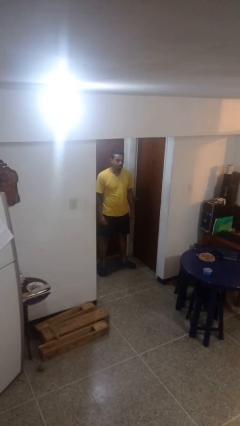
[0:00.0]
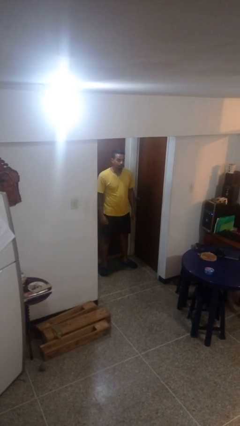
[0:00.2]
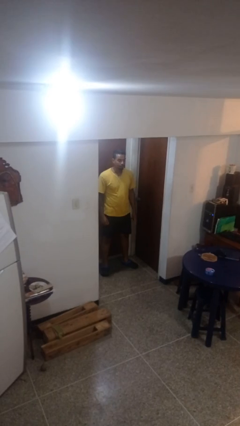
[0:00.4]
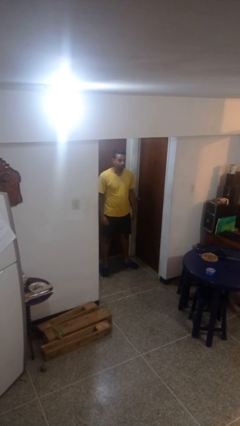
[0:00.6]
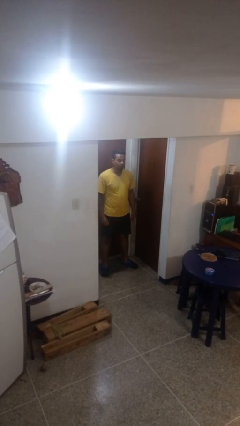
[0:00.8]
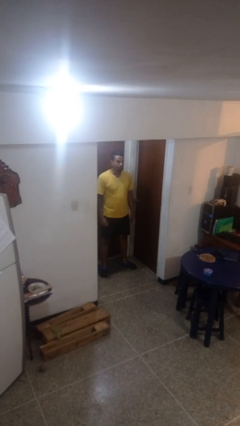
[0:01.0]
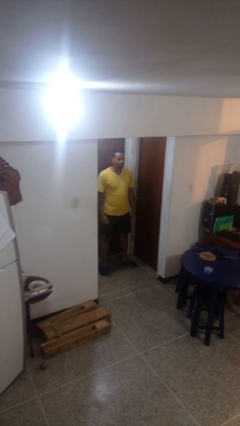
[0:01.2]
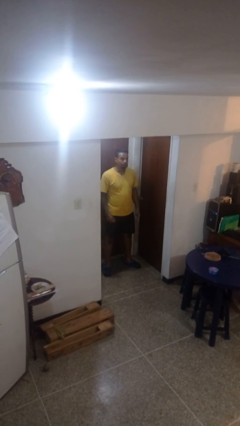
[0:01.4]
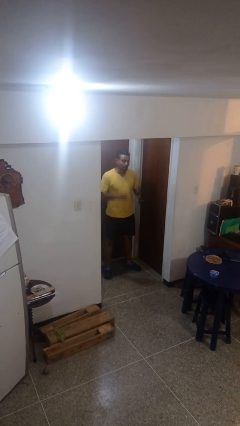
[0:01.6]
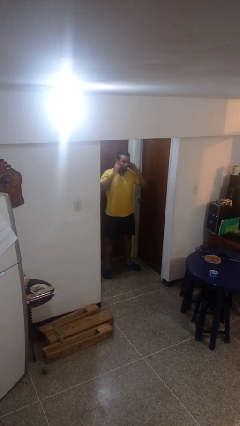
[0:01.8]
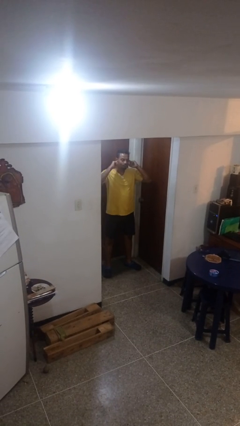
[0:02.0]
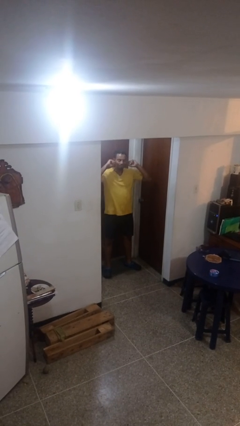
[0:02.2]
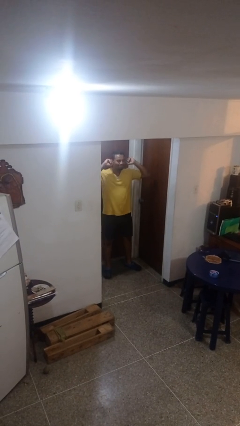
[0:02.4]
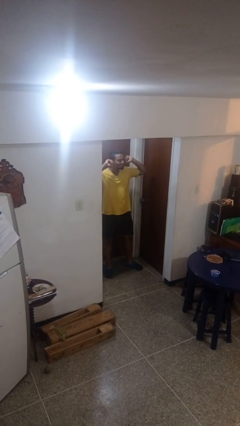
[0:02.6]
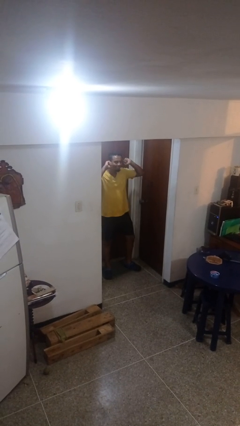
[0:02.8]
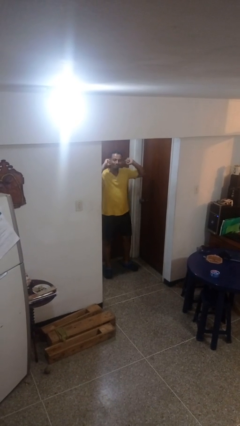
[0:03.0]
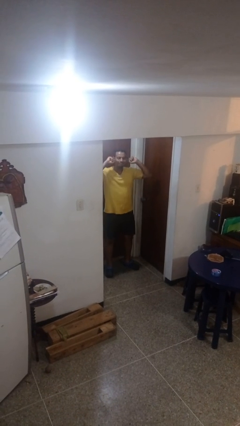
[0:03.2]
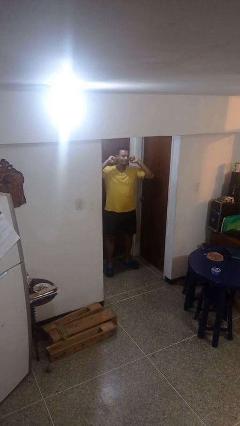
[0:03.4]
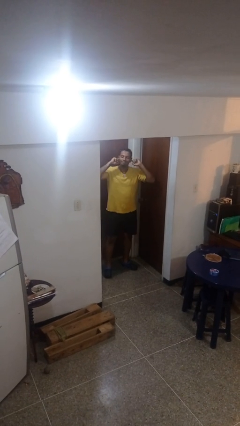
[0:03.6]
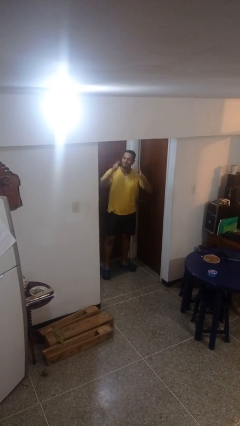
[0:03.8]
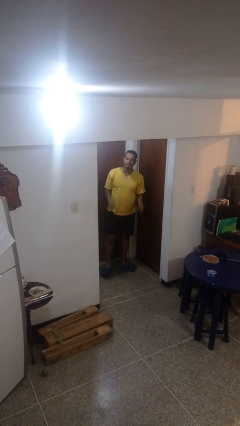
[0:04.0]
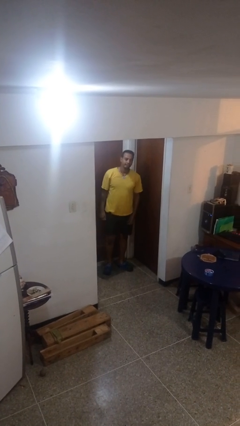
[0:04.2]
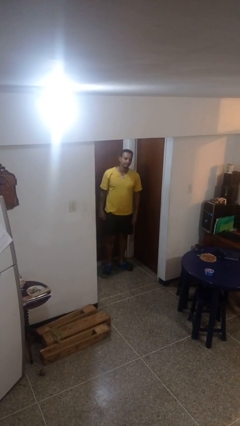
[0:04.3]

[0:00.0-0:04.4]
person puts fingers in ear

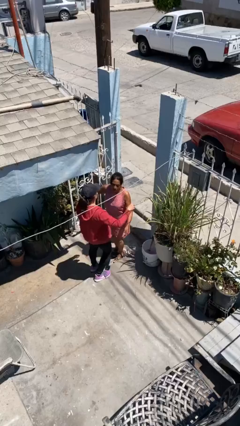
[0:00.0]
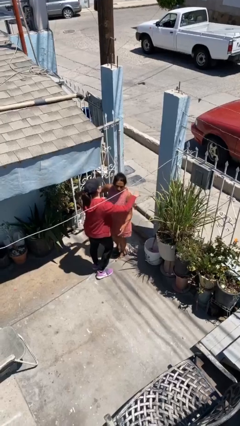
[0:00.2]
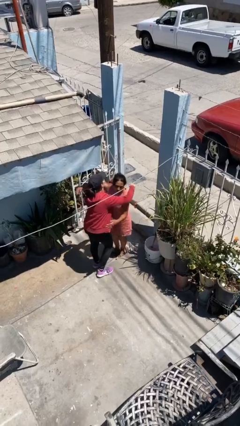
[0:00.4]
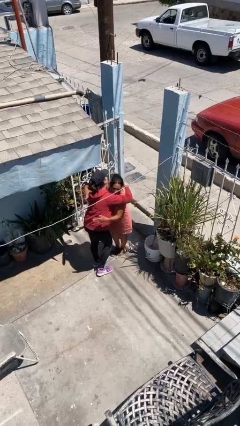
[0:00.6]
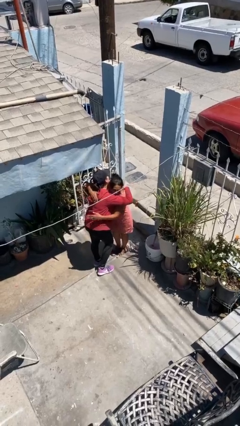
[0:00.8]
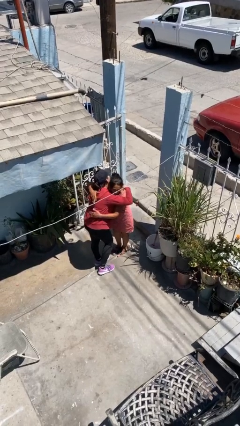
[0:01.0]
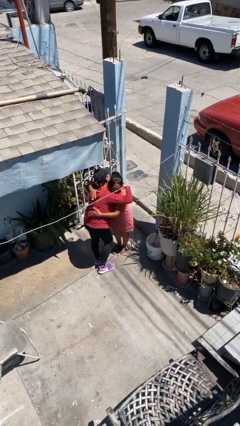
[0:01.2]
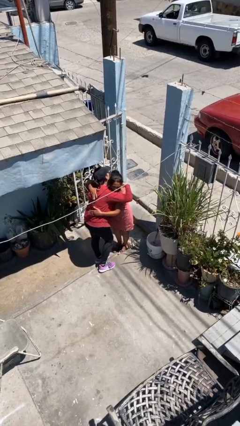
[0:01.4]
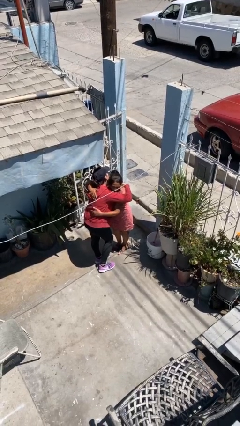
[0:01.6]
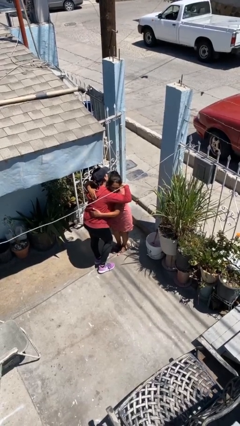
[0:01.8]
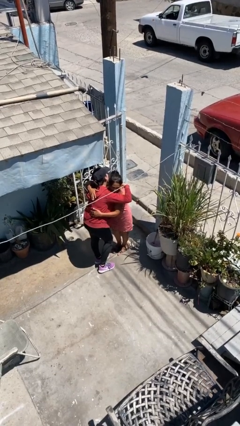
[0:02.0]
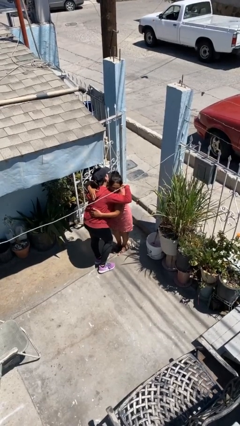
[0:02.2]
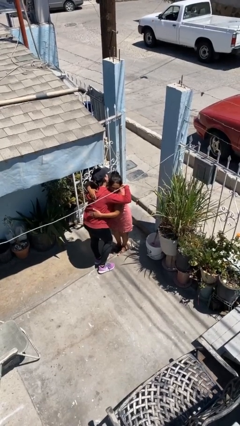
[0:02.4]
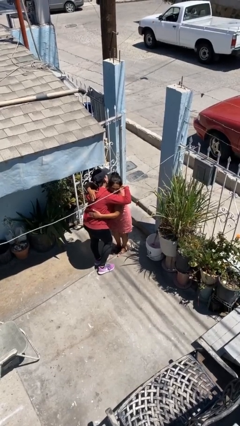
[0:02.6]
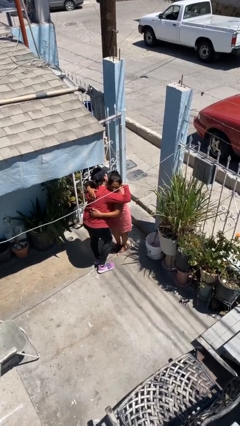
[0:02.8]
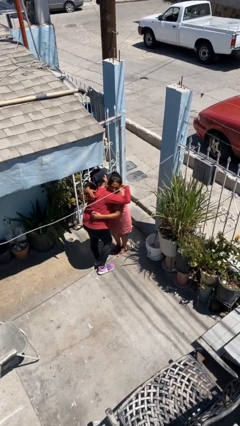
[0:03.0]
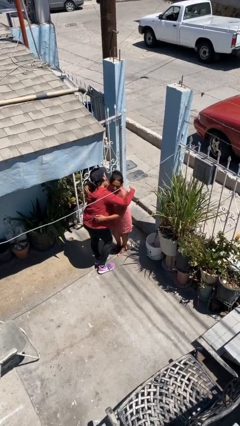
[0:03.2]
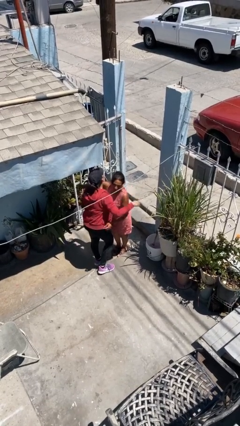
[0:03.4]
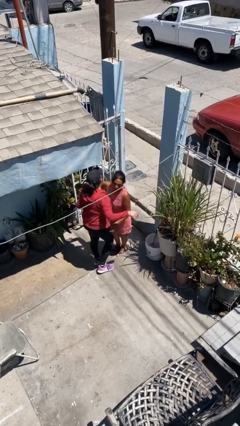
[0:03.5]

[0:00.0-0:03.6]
person embraces person

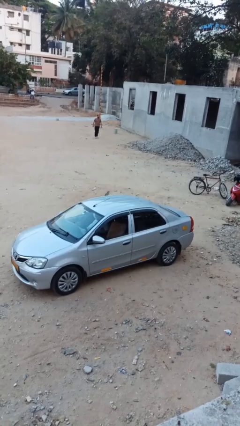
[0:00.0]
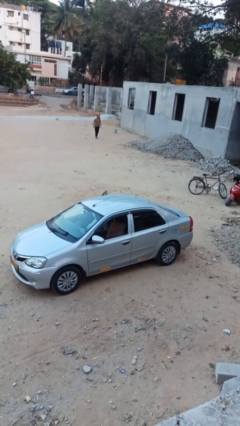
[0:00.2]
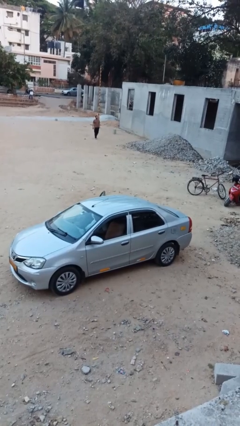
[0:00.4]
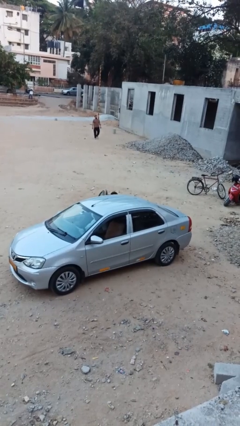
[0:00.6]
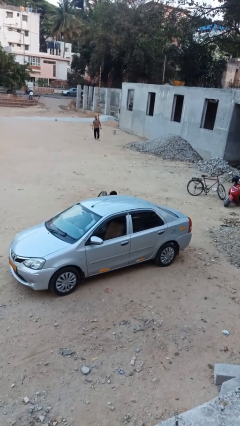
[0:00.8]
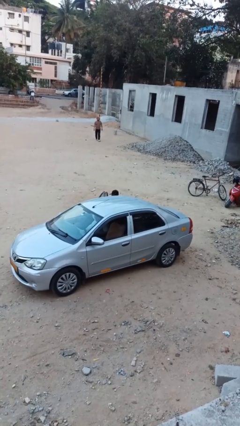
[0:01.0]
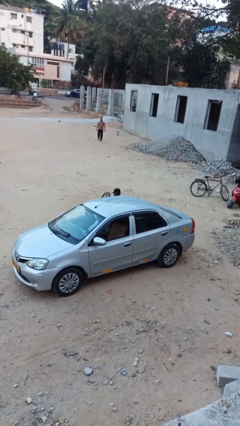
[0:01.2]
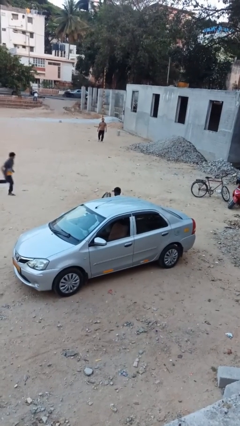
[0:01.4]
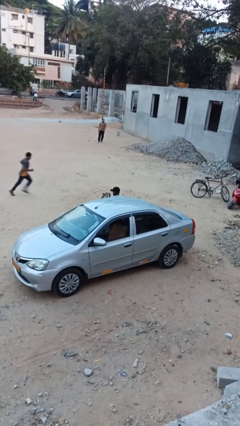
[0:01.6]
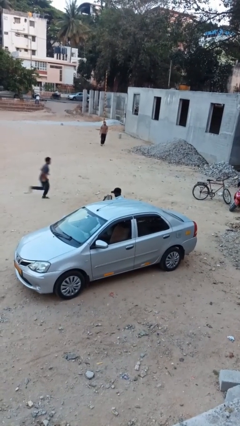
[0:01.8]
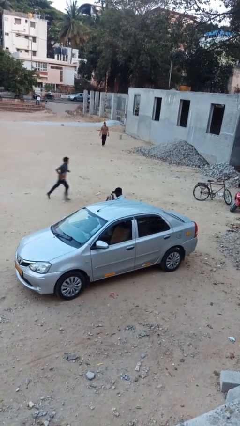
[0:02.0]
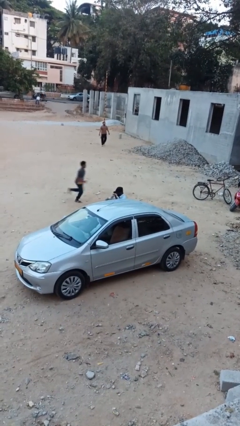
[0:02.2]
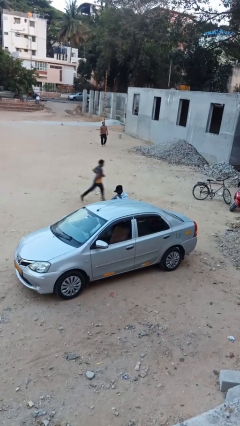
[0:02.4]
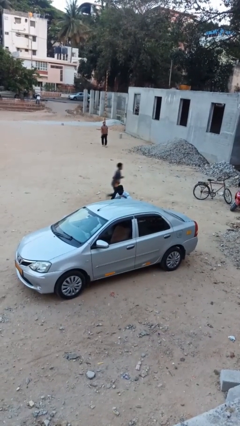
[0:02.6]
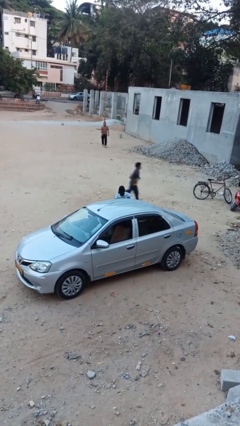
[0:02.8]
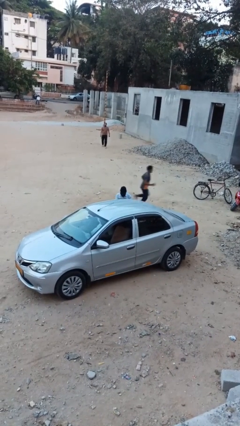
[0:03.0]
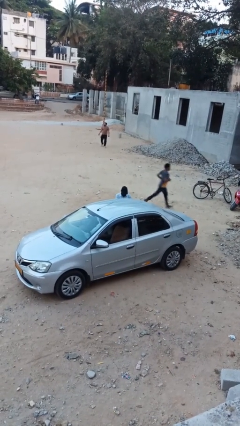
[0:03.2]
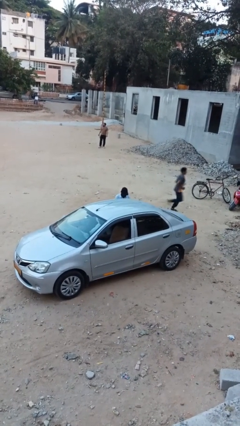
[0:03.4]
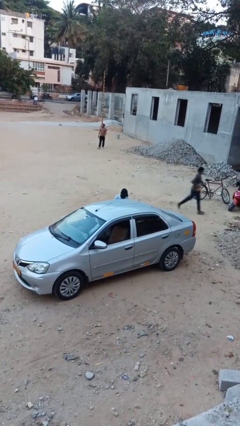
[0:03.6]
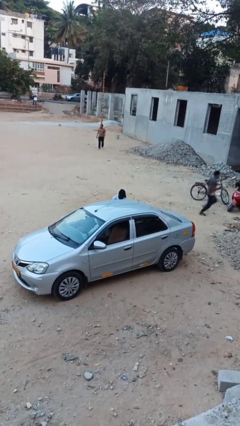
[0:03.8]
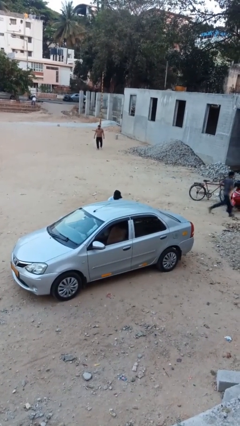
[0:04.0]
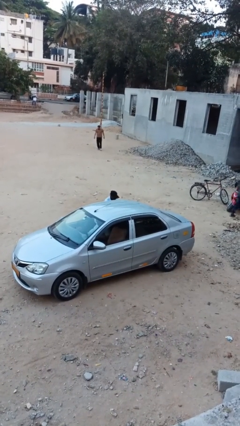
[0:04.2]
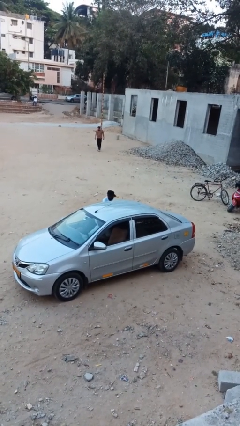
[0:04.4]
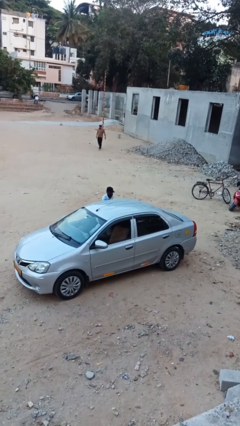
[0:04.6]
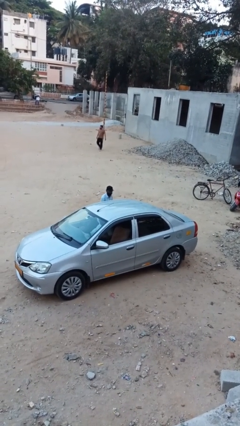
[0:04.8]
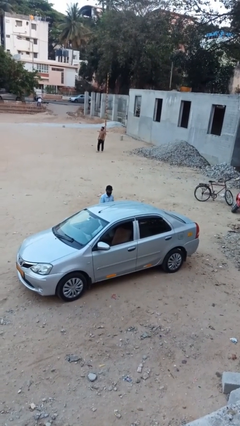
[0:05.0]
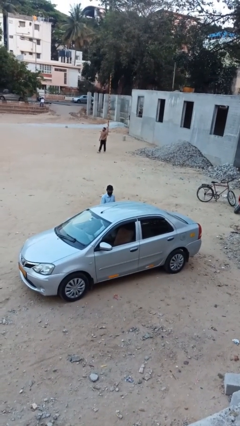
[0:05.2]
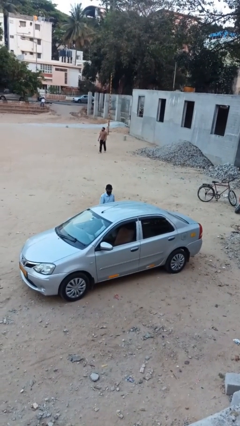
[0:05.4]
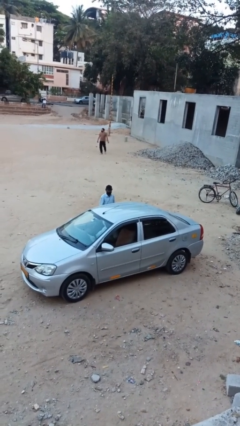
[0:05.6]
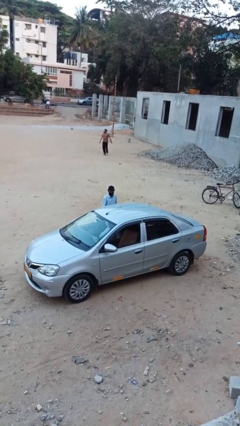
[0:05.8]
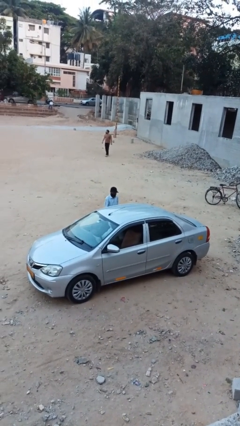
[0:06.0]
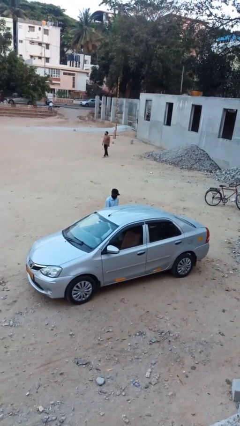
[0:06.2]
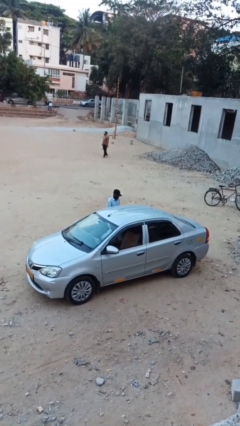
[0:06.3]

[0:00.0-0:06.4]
person exits car

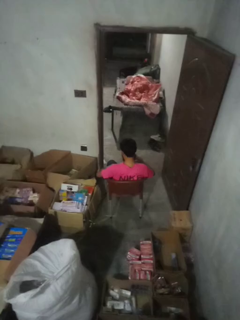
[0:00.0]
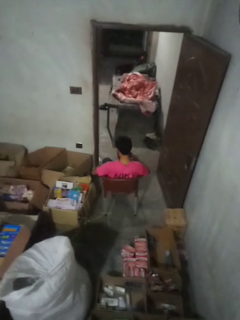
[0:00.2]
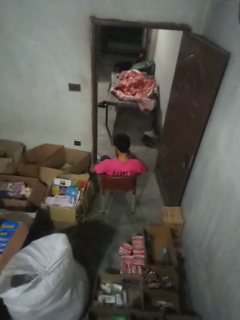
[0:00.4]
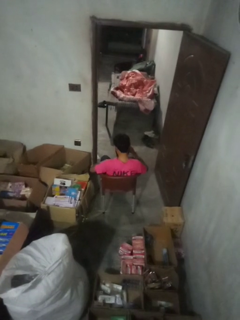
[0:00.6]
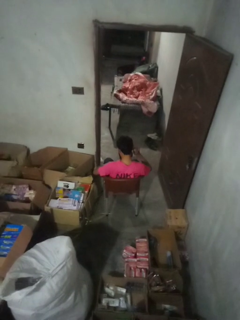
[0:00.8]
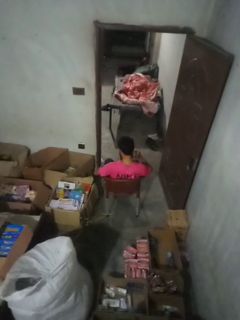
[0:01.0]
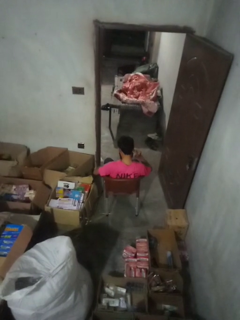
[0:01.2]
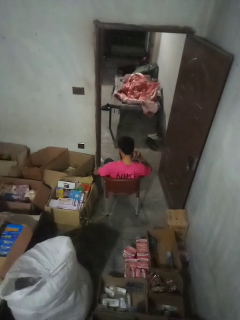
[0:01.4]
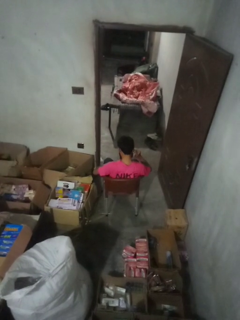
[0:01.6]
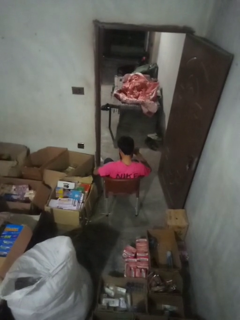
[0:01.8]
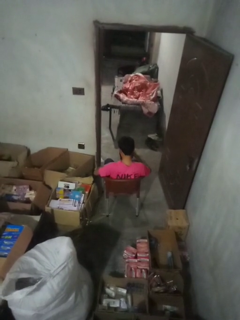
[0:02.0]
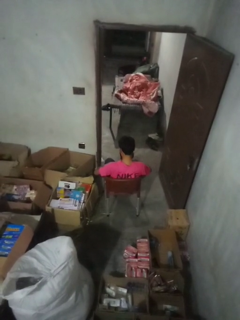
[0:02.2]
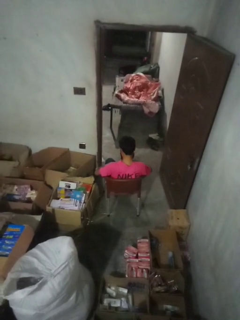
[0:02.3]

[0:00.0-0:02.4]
person touches earlobe

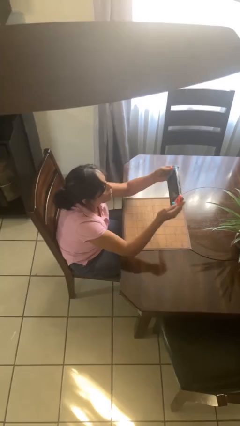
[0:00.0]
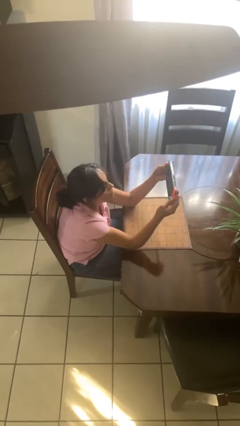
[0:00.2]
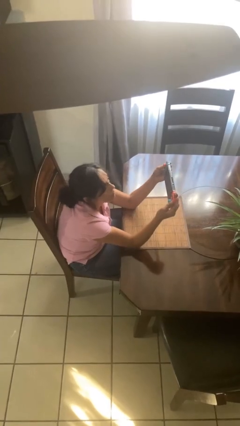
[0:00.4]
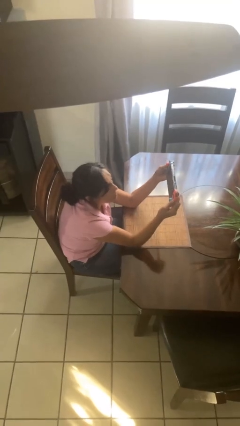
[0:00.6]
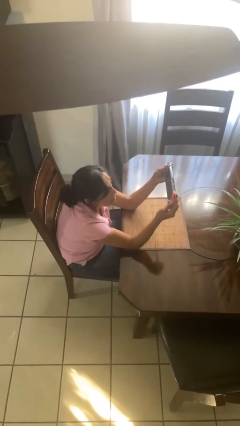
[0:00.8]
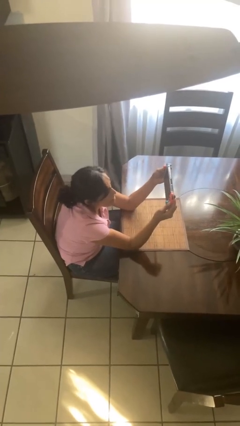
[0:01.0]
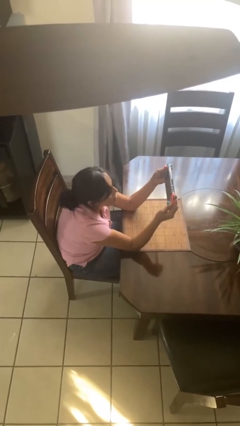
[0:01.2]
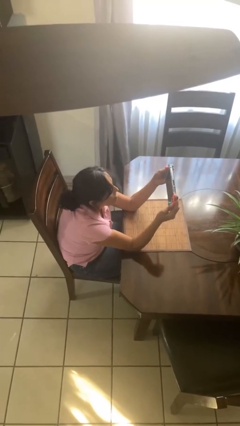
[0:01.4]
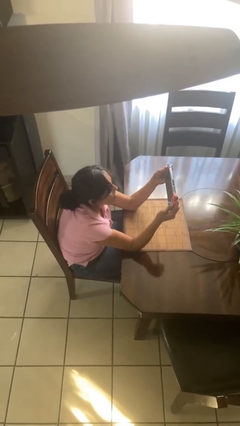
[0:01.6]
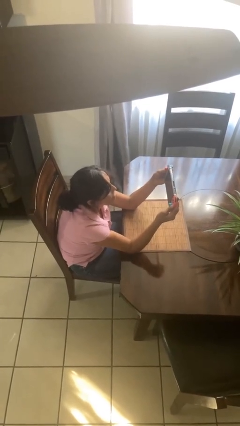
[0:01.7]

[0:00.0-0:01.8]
person interacts with handheld game
